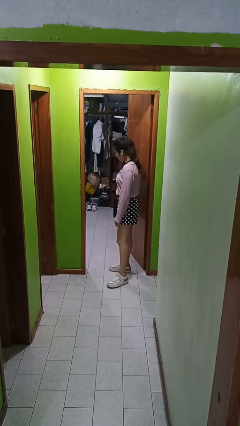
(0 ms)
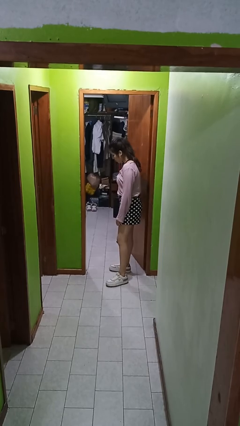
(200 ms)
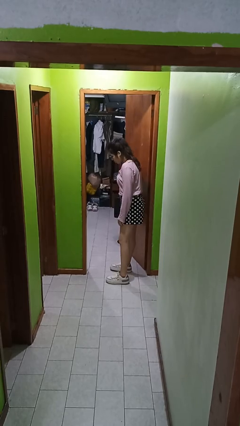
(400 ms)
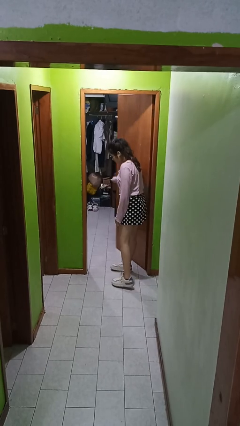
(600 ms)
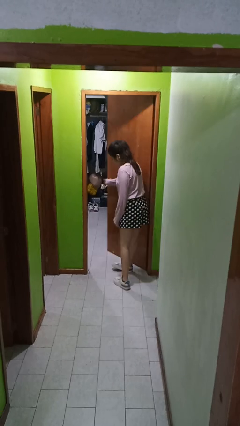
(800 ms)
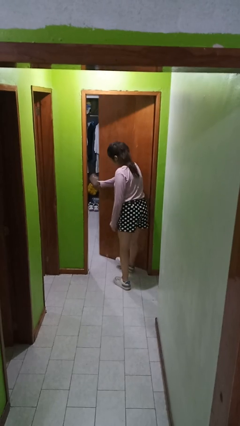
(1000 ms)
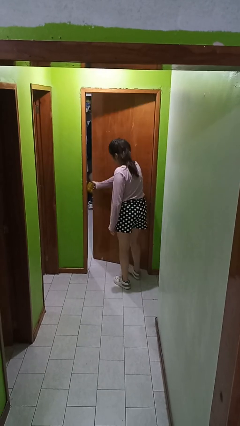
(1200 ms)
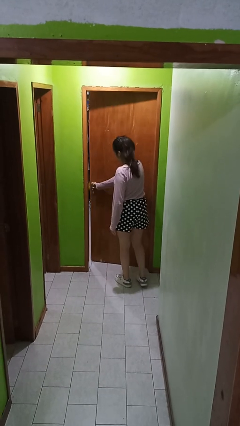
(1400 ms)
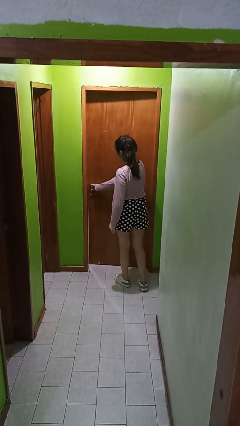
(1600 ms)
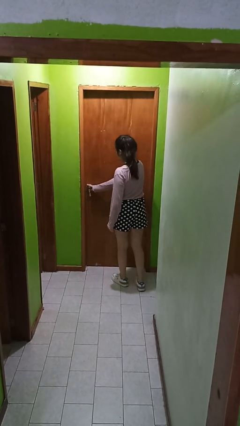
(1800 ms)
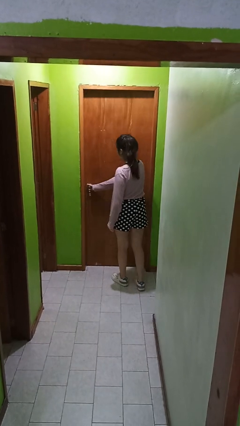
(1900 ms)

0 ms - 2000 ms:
person closes facility door

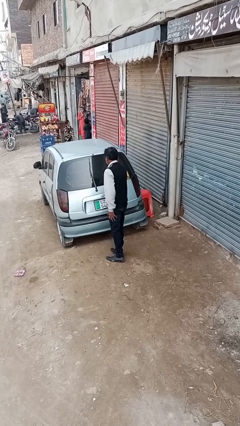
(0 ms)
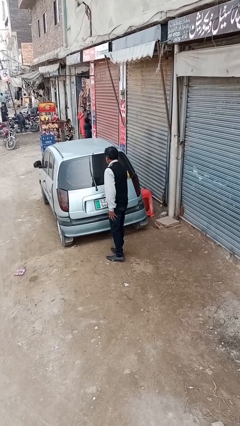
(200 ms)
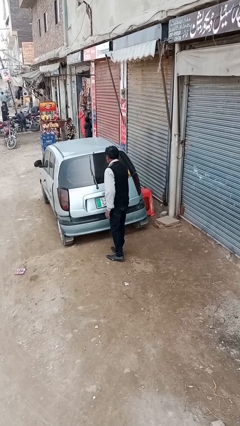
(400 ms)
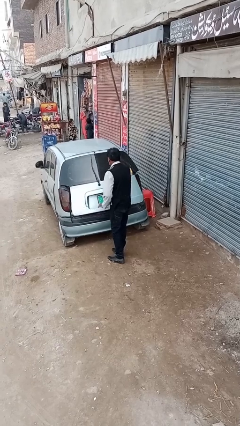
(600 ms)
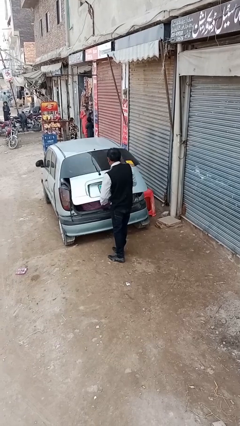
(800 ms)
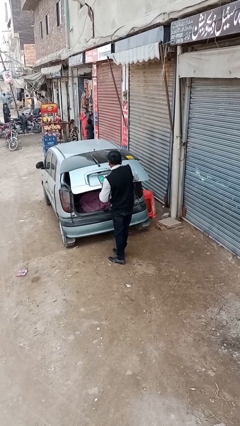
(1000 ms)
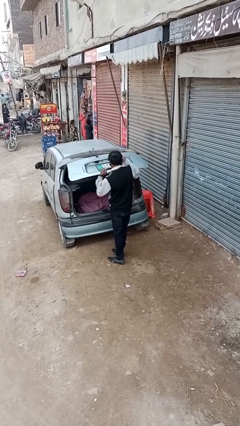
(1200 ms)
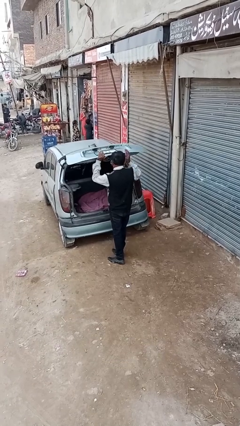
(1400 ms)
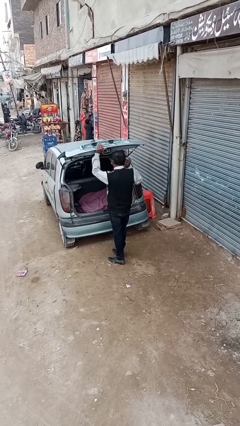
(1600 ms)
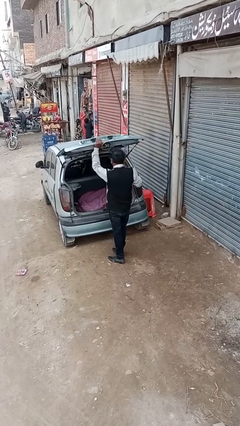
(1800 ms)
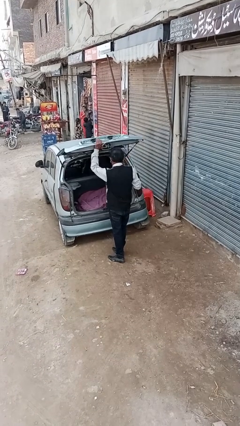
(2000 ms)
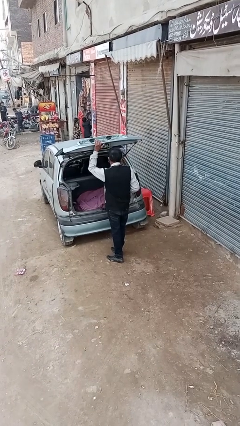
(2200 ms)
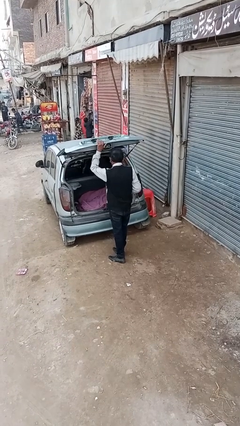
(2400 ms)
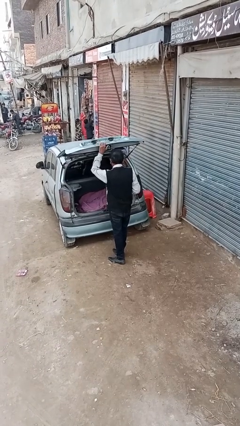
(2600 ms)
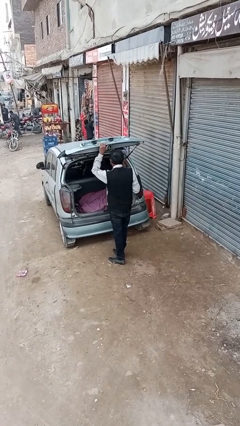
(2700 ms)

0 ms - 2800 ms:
person opens car trunk

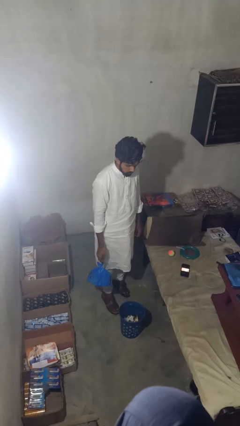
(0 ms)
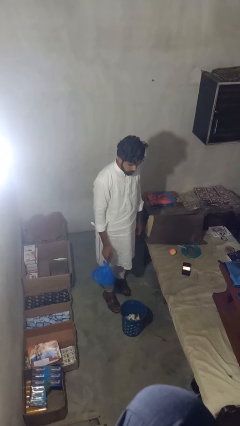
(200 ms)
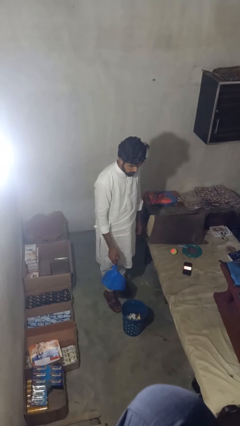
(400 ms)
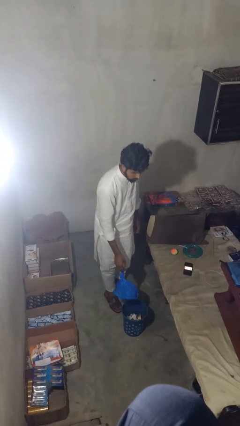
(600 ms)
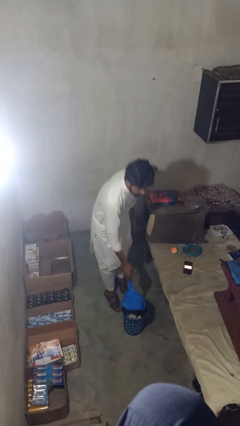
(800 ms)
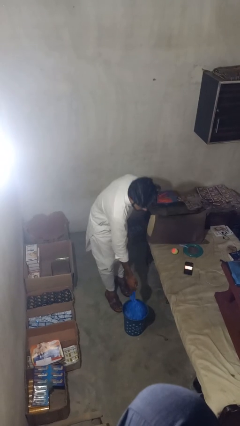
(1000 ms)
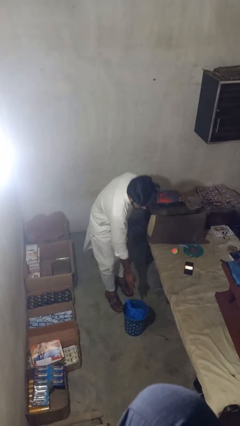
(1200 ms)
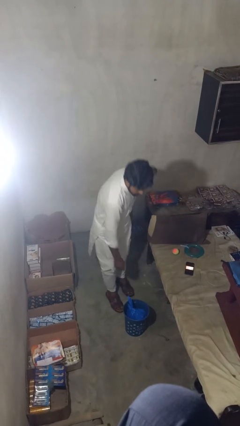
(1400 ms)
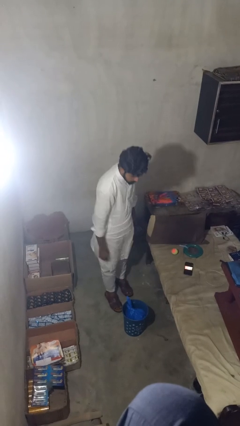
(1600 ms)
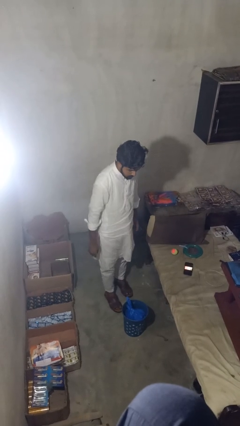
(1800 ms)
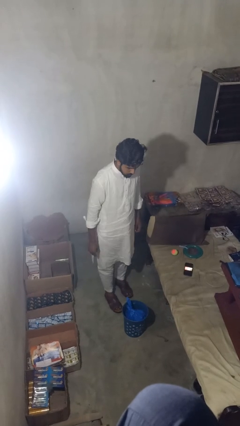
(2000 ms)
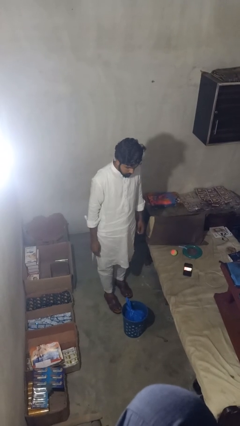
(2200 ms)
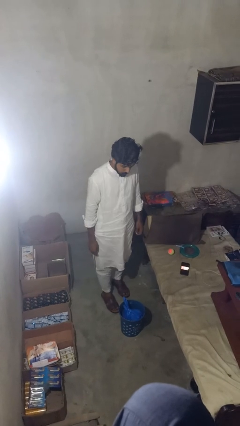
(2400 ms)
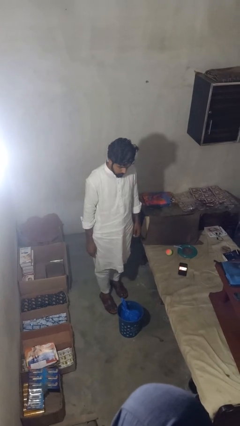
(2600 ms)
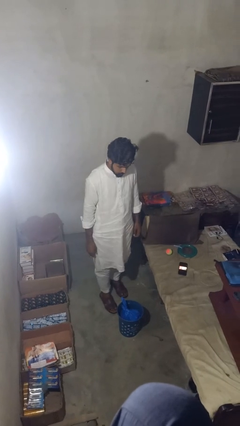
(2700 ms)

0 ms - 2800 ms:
person puts object into basket

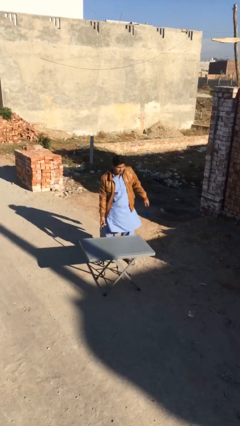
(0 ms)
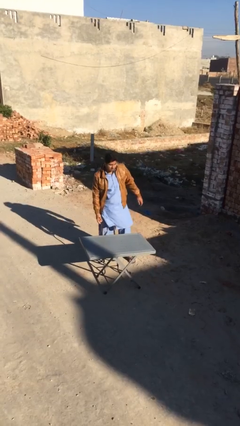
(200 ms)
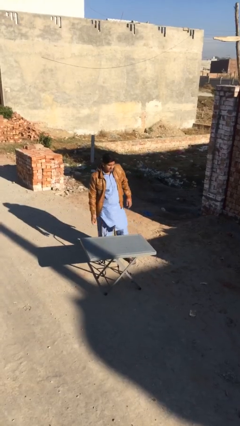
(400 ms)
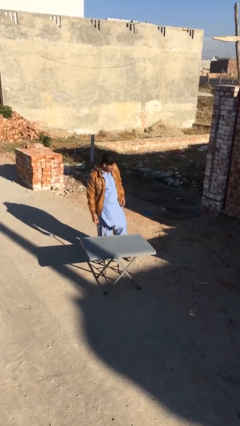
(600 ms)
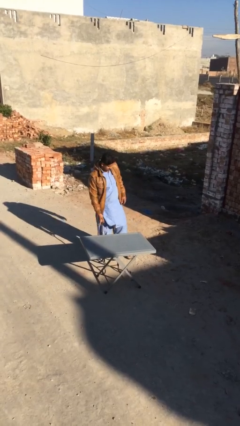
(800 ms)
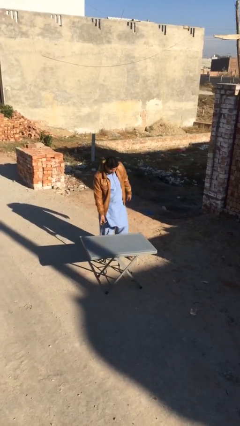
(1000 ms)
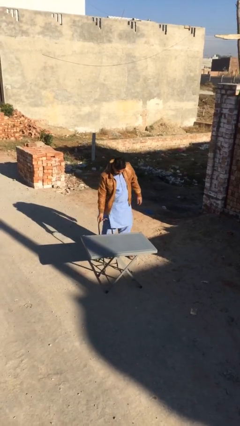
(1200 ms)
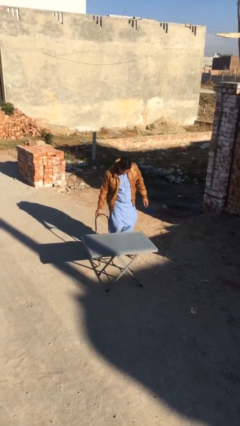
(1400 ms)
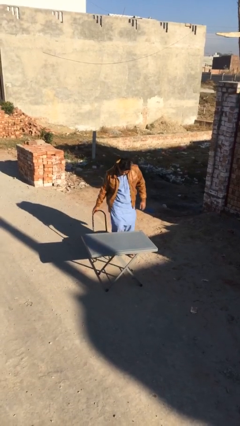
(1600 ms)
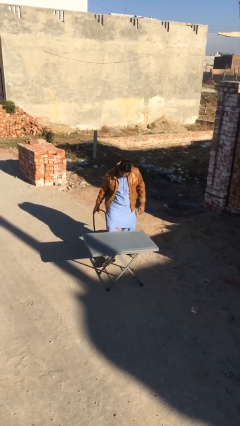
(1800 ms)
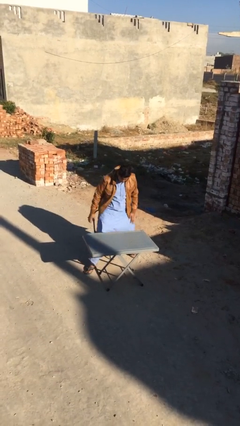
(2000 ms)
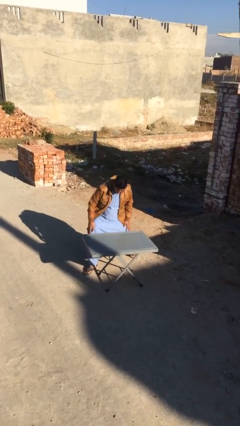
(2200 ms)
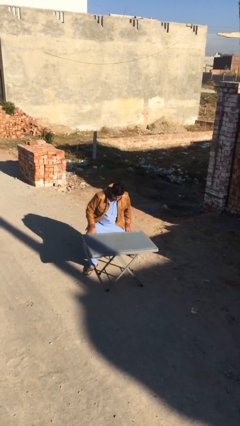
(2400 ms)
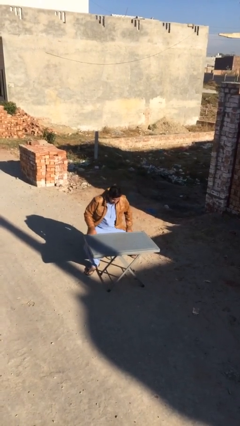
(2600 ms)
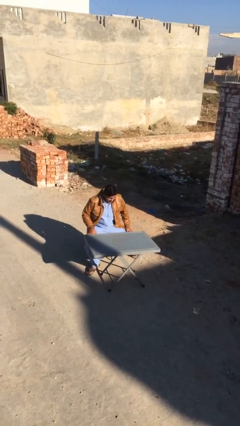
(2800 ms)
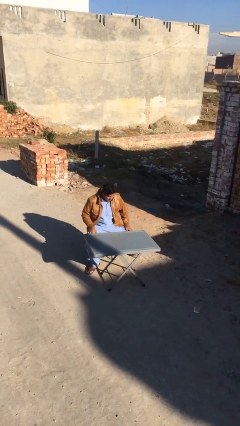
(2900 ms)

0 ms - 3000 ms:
person sits down

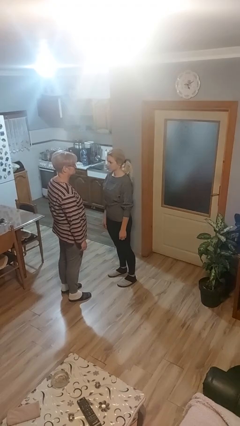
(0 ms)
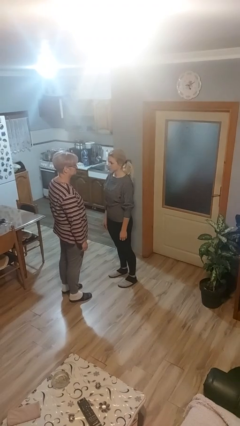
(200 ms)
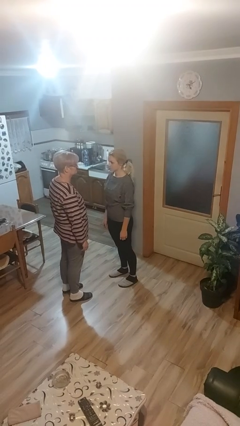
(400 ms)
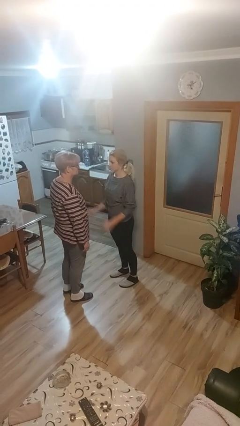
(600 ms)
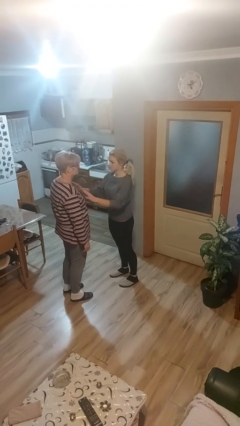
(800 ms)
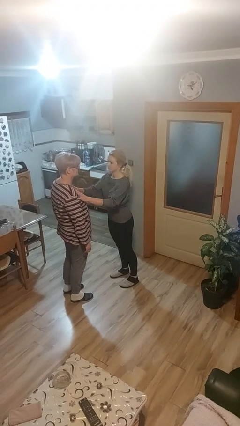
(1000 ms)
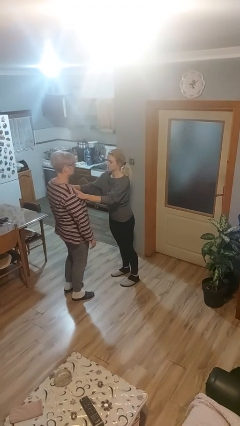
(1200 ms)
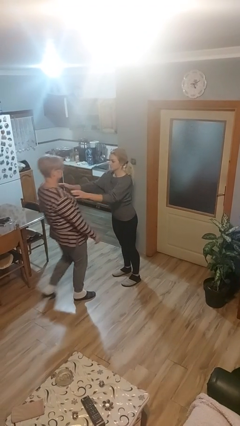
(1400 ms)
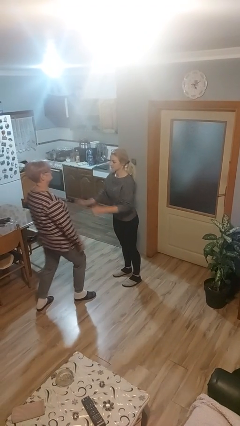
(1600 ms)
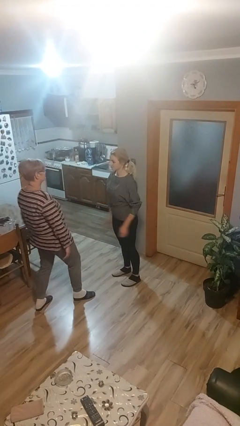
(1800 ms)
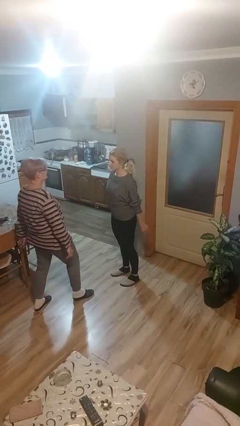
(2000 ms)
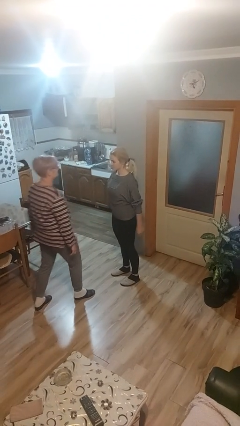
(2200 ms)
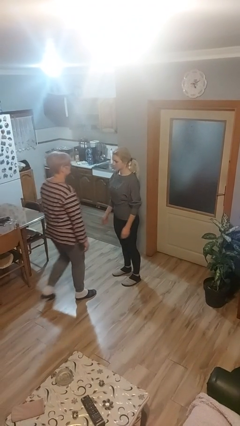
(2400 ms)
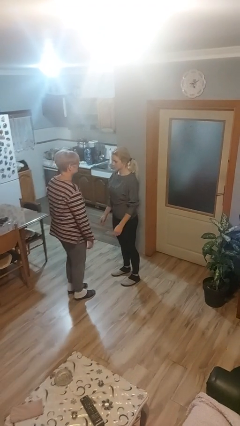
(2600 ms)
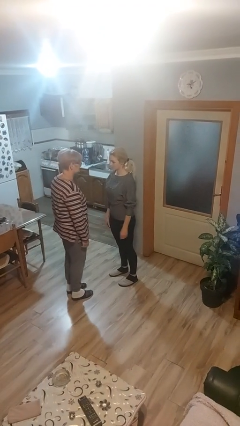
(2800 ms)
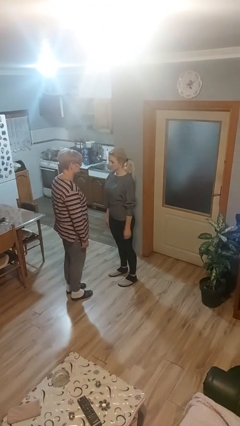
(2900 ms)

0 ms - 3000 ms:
person shoves person

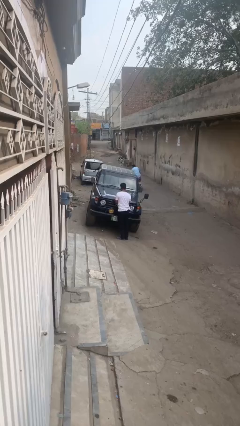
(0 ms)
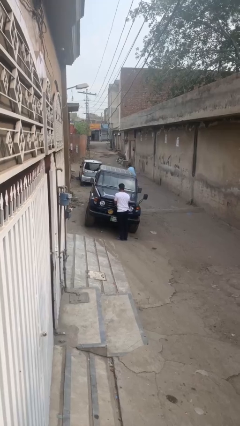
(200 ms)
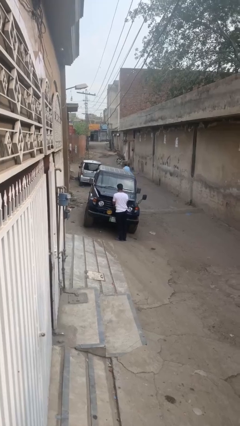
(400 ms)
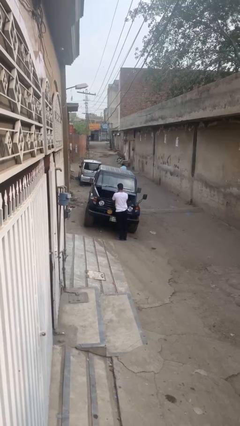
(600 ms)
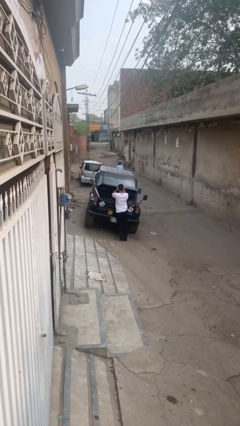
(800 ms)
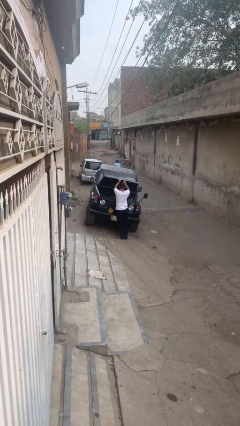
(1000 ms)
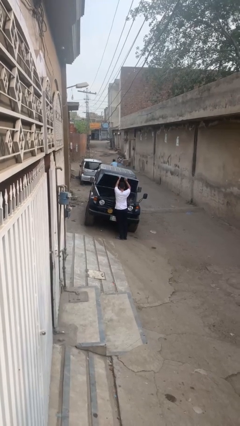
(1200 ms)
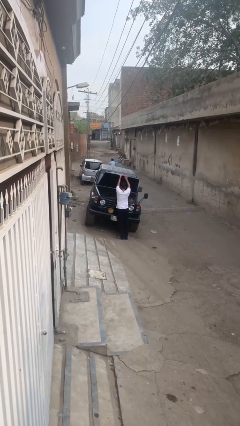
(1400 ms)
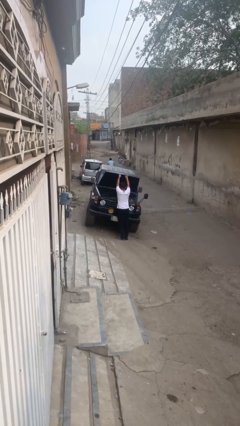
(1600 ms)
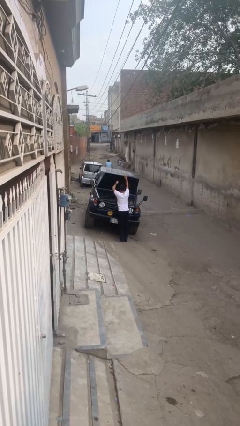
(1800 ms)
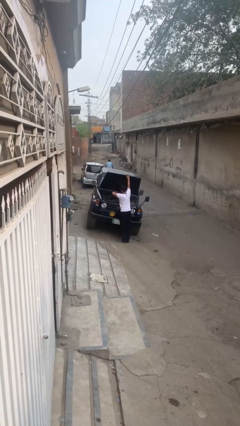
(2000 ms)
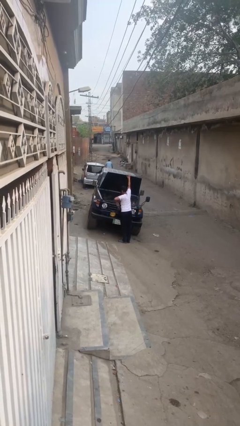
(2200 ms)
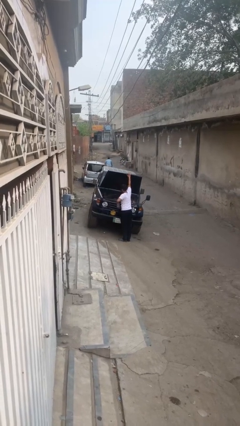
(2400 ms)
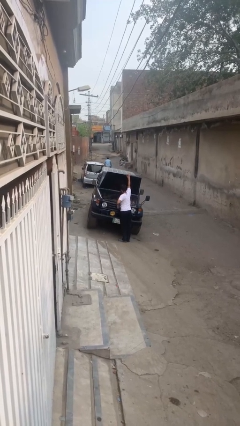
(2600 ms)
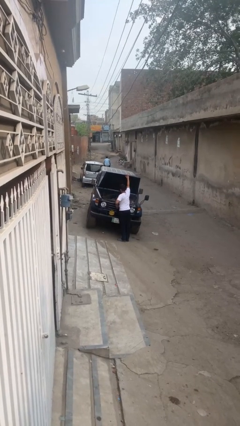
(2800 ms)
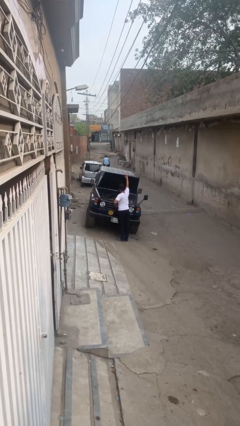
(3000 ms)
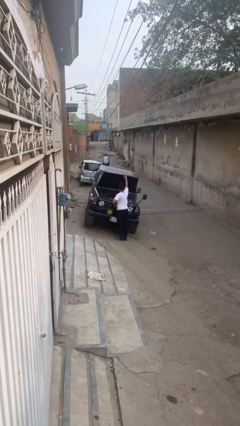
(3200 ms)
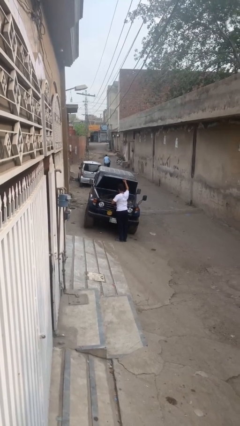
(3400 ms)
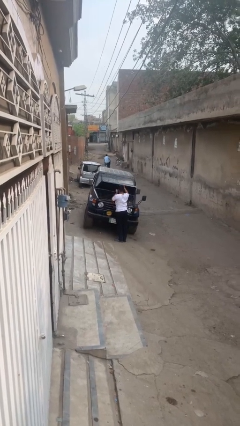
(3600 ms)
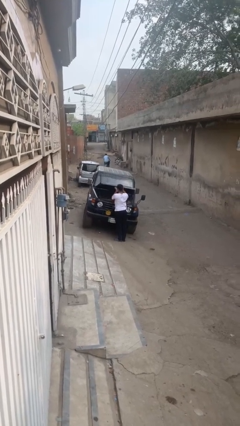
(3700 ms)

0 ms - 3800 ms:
person opens car hood
